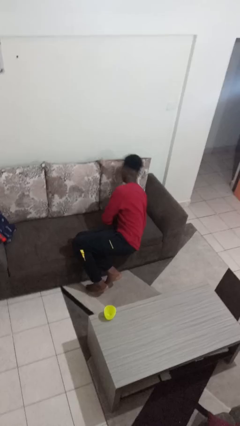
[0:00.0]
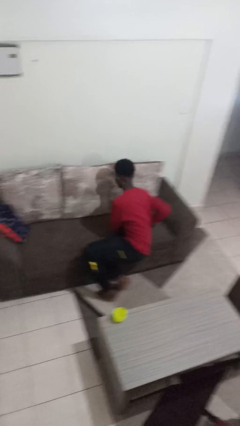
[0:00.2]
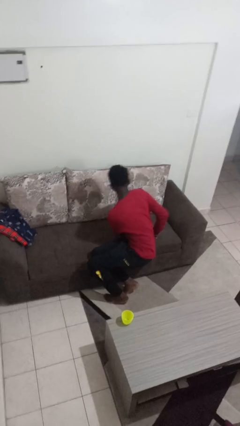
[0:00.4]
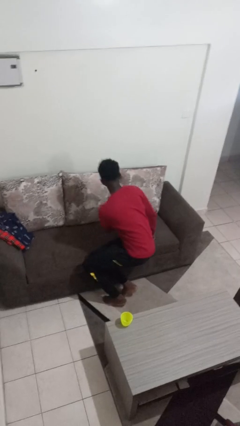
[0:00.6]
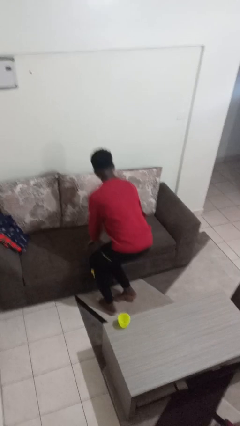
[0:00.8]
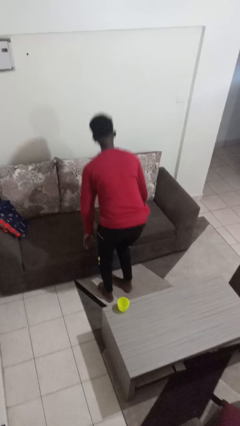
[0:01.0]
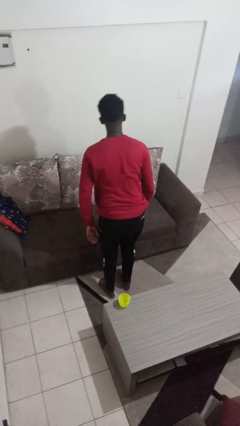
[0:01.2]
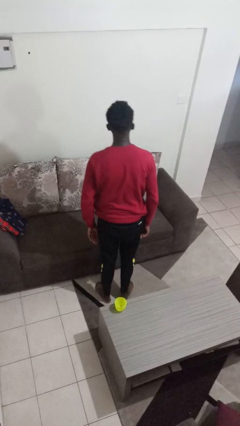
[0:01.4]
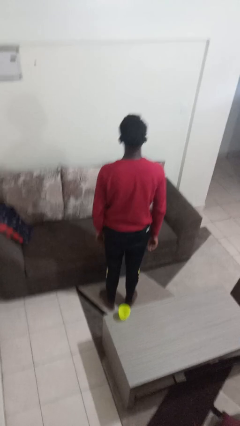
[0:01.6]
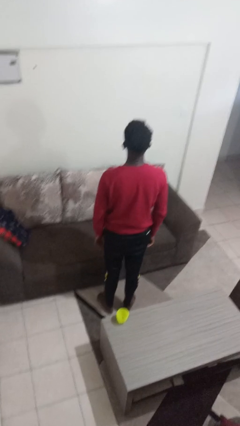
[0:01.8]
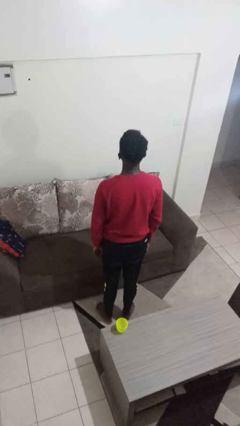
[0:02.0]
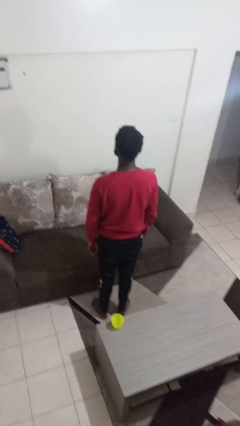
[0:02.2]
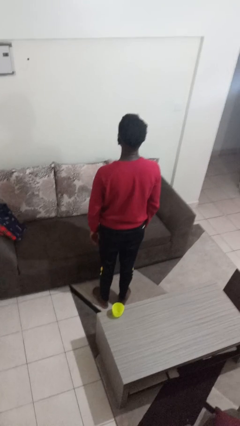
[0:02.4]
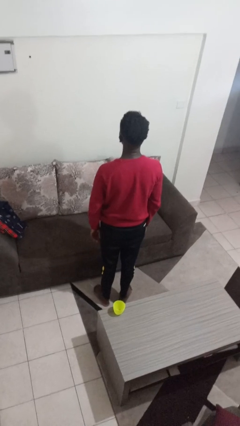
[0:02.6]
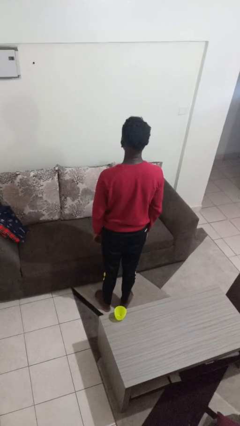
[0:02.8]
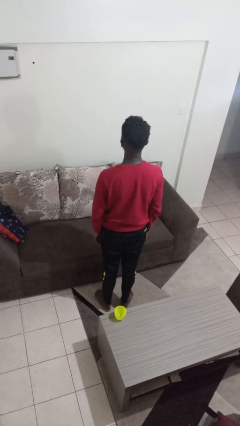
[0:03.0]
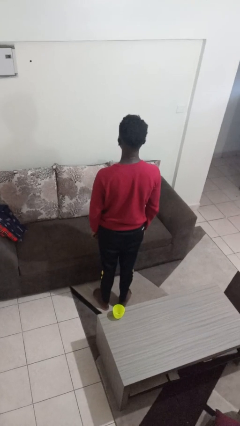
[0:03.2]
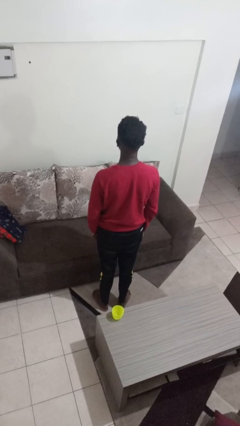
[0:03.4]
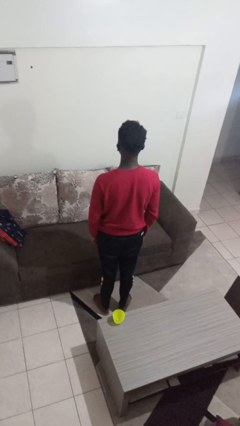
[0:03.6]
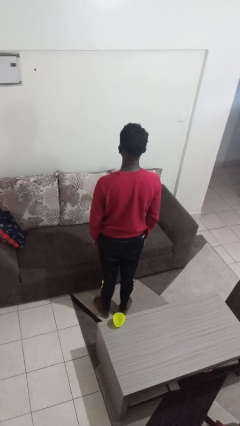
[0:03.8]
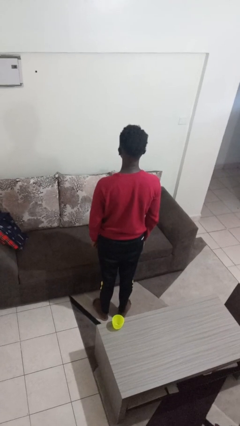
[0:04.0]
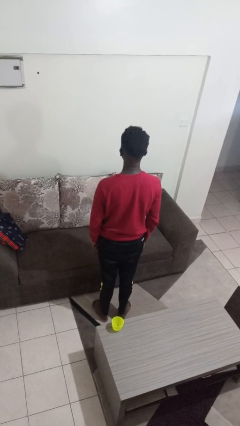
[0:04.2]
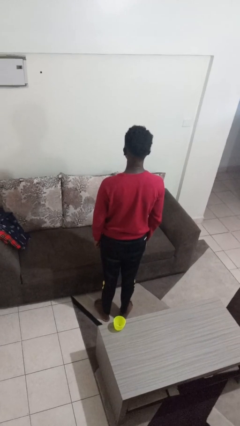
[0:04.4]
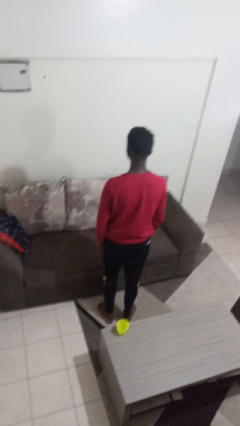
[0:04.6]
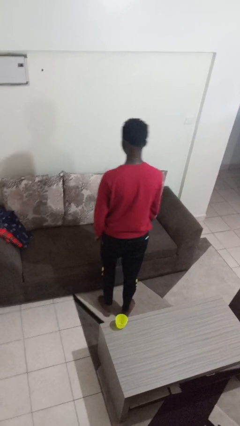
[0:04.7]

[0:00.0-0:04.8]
person stands up

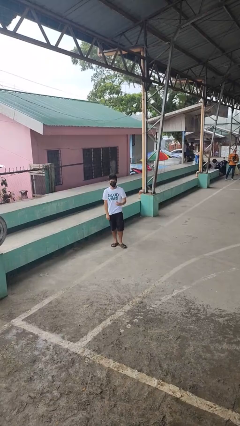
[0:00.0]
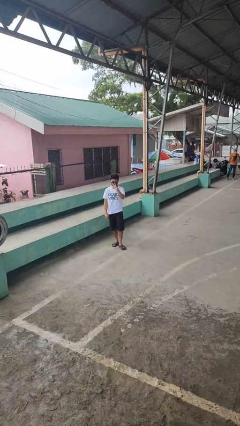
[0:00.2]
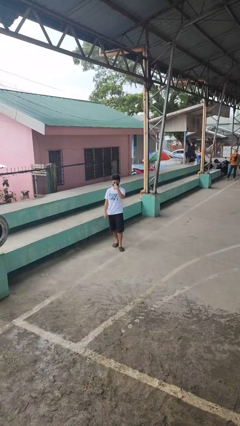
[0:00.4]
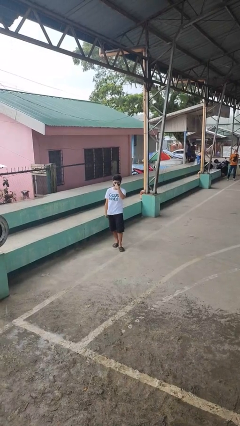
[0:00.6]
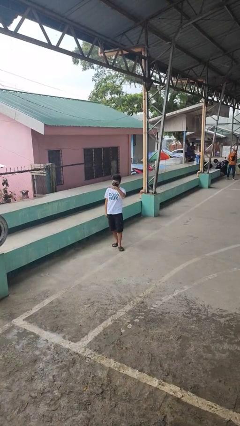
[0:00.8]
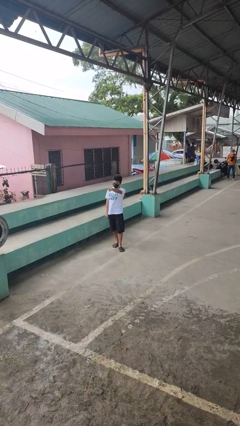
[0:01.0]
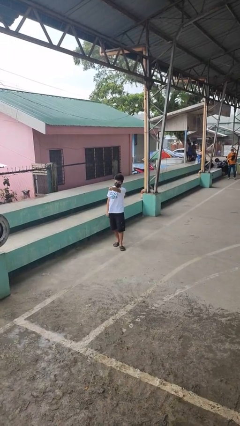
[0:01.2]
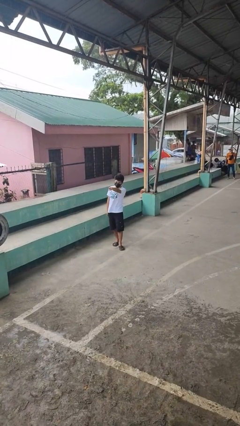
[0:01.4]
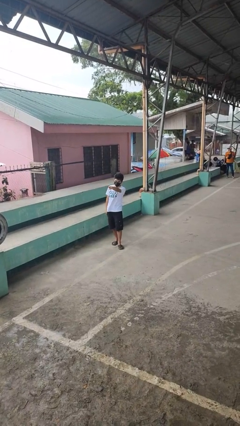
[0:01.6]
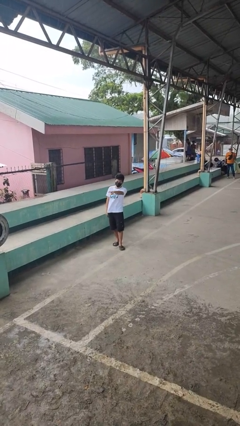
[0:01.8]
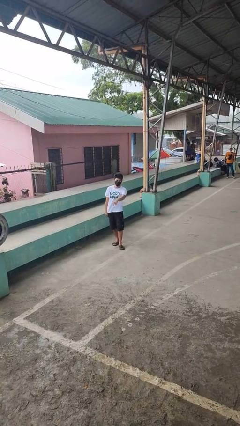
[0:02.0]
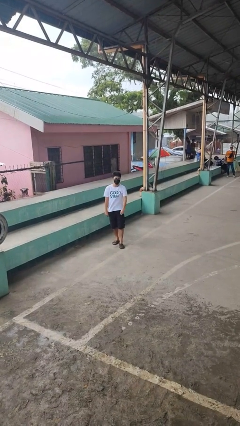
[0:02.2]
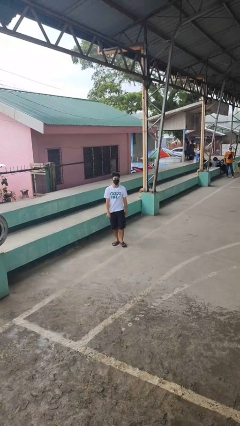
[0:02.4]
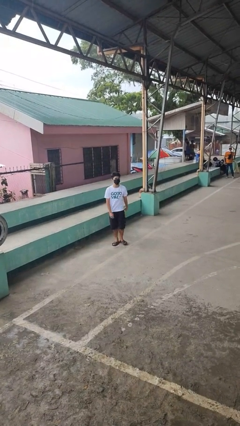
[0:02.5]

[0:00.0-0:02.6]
person gestures watch closely

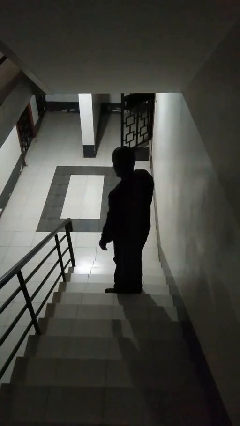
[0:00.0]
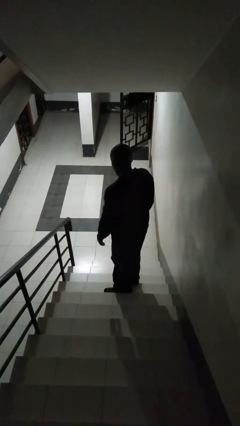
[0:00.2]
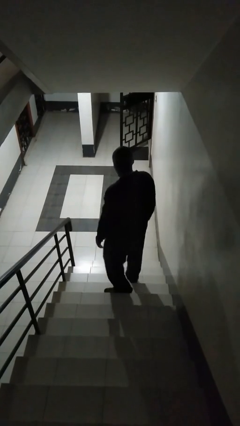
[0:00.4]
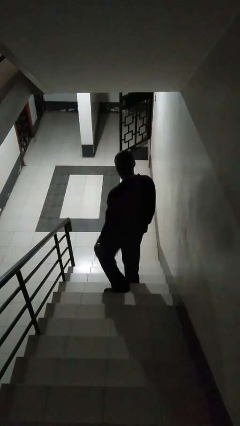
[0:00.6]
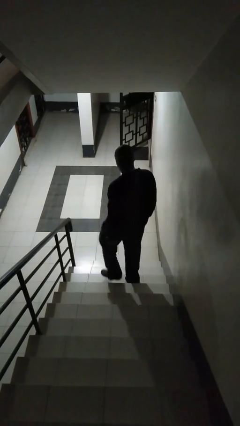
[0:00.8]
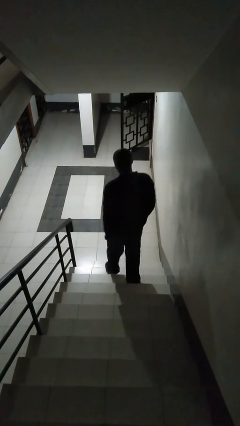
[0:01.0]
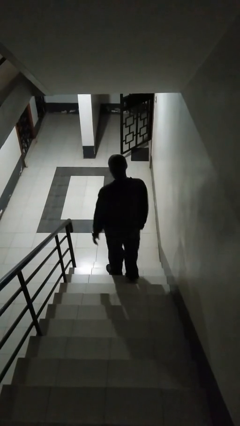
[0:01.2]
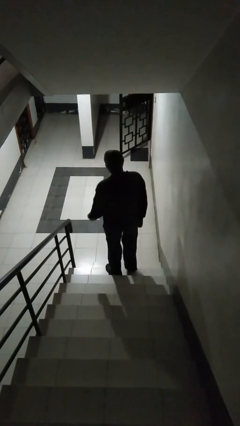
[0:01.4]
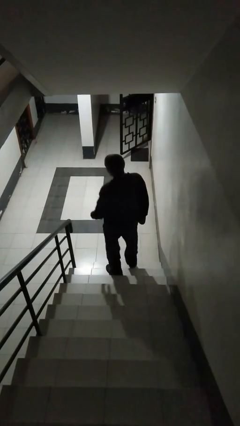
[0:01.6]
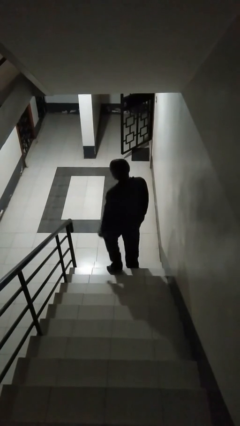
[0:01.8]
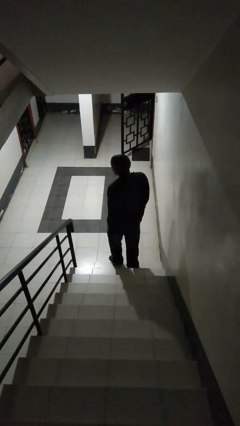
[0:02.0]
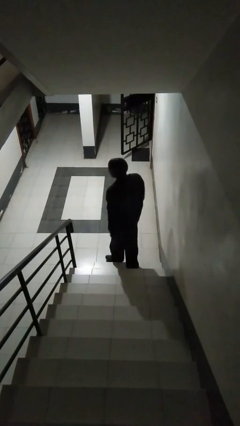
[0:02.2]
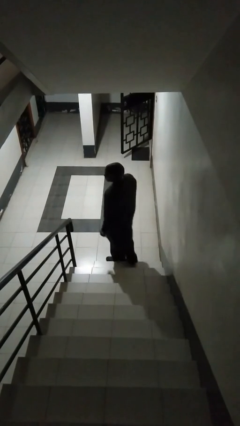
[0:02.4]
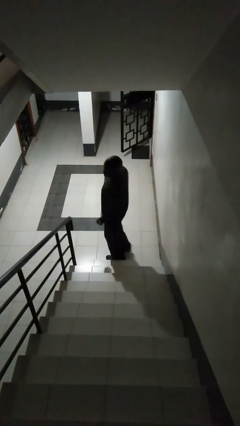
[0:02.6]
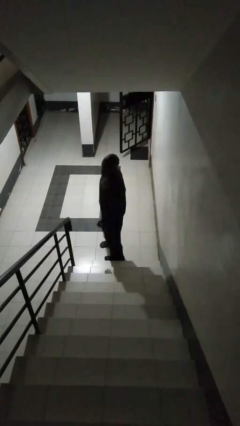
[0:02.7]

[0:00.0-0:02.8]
person climbs down stairs

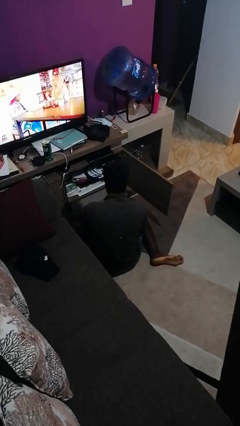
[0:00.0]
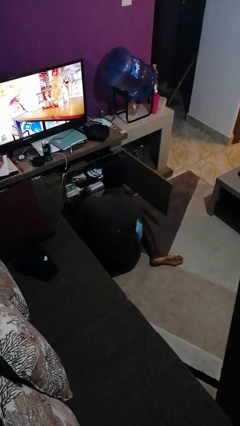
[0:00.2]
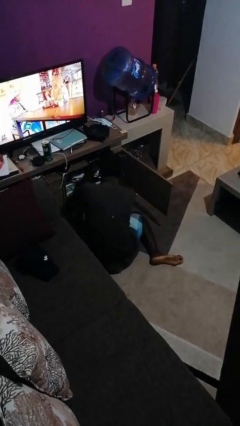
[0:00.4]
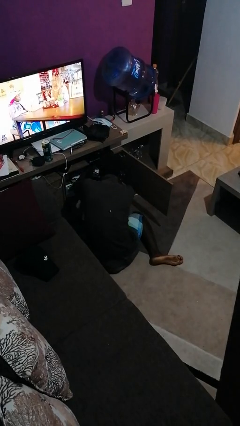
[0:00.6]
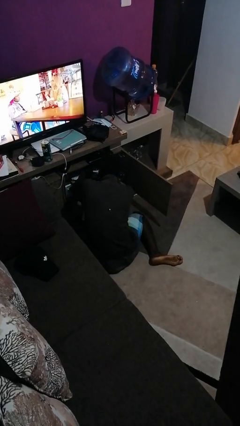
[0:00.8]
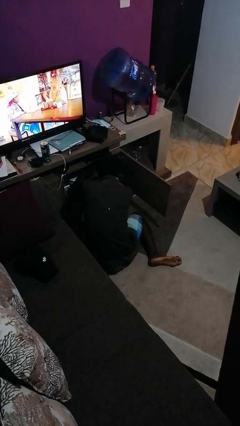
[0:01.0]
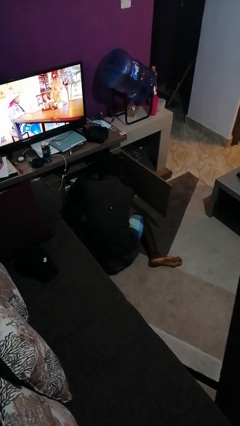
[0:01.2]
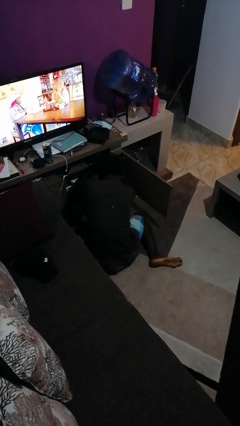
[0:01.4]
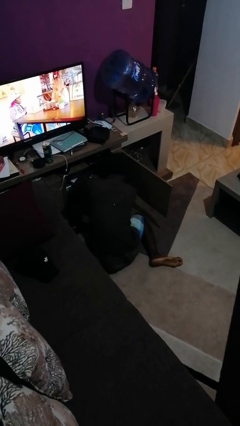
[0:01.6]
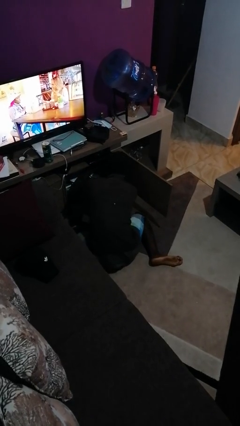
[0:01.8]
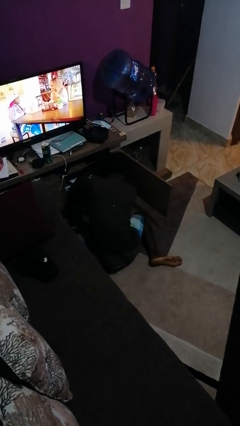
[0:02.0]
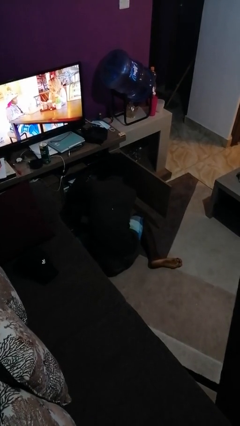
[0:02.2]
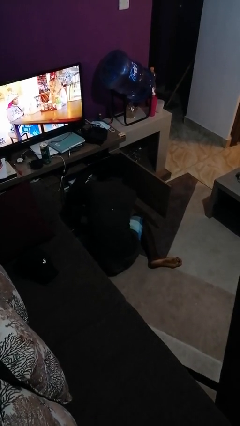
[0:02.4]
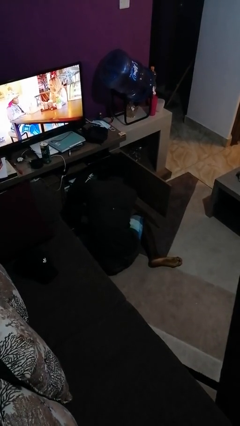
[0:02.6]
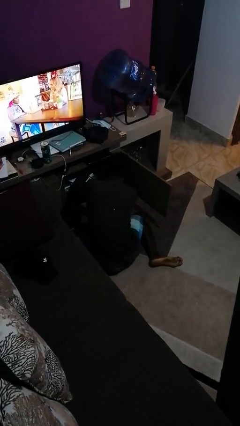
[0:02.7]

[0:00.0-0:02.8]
person searches in cabinet

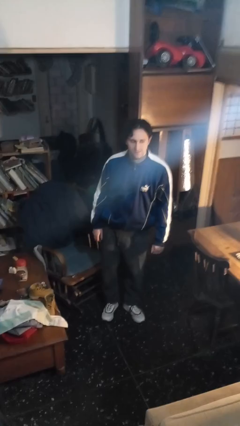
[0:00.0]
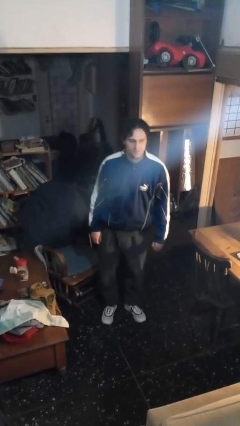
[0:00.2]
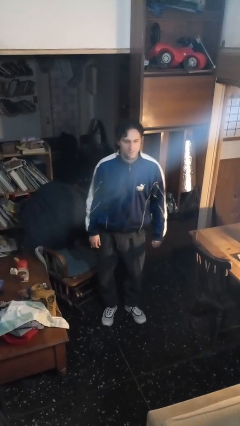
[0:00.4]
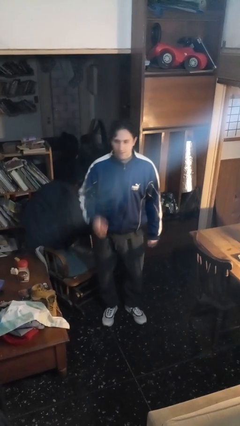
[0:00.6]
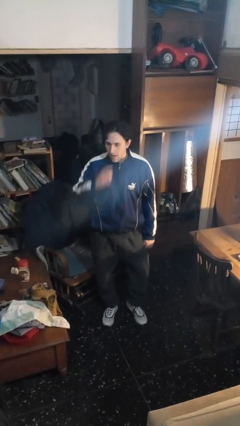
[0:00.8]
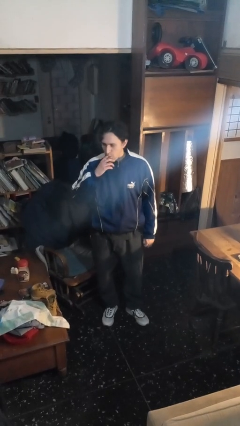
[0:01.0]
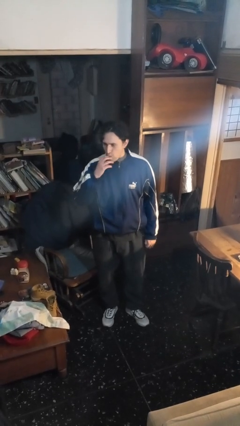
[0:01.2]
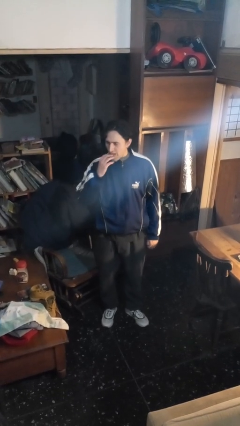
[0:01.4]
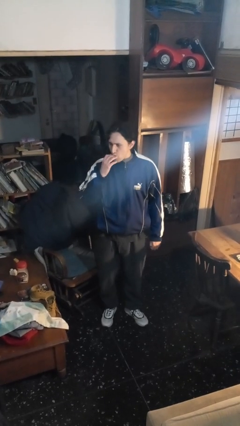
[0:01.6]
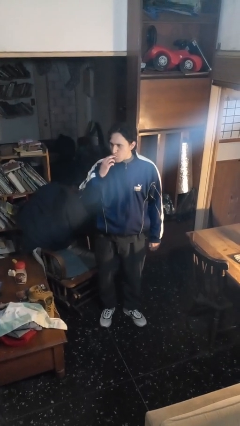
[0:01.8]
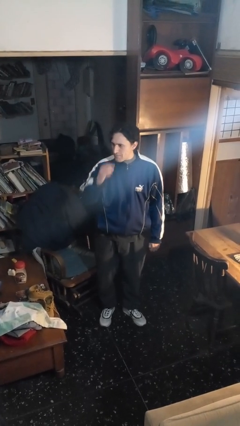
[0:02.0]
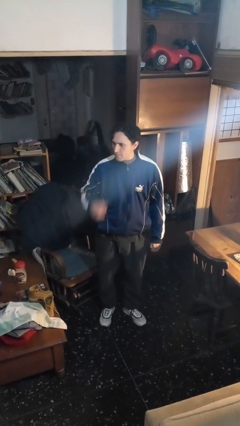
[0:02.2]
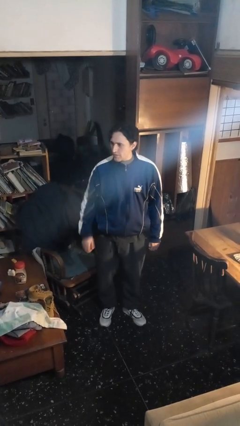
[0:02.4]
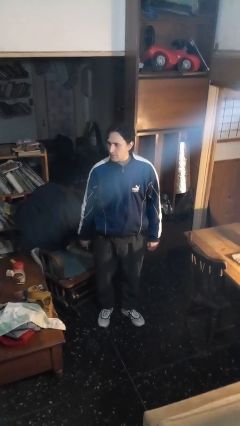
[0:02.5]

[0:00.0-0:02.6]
person licks fingers

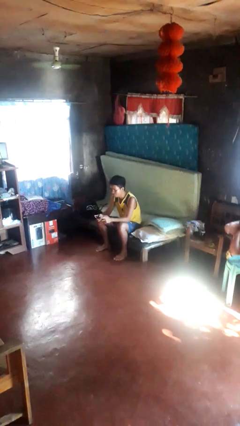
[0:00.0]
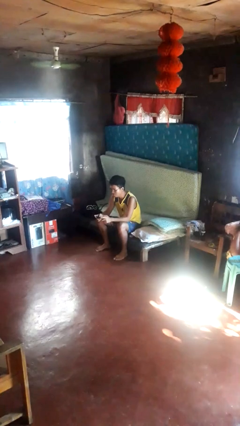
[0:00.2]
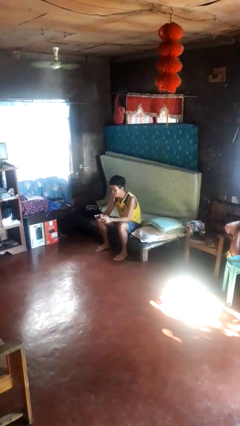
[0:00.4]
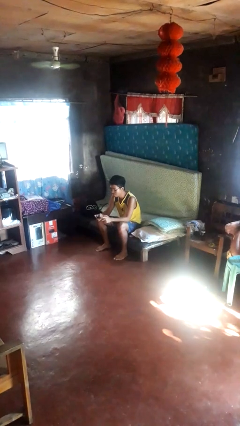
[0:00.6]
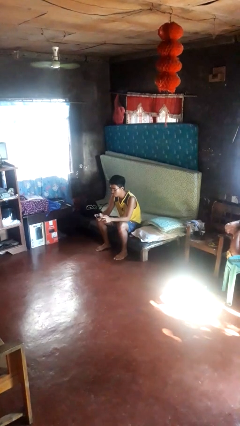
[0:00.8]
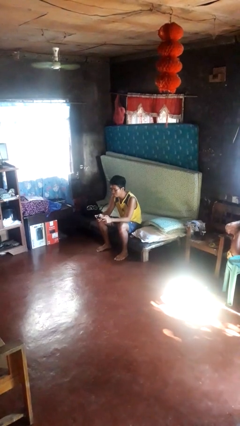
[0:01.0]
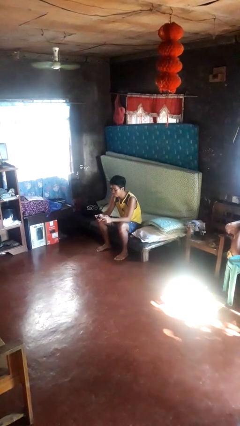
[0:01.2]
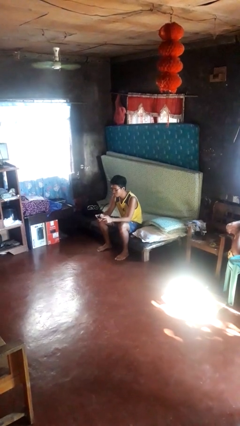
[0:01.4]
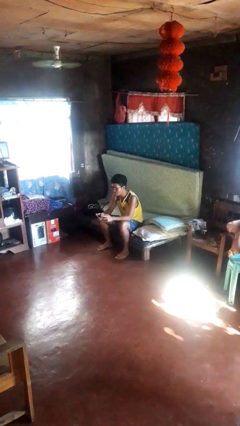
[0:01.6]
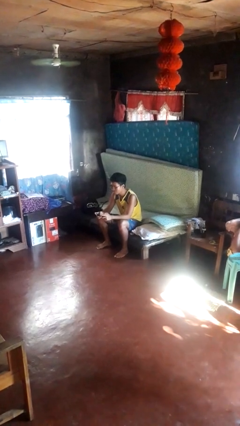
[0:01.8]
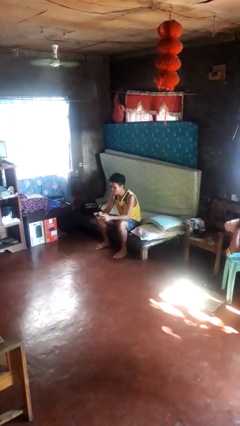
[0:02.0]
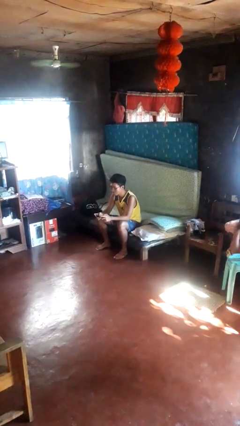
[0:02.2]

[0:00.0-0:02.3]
person interacts with handheld game
